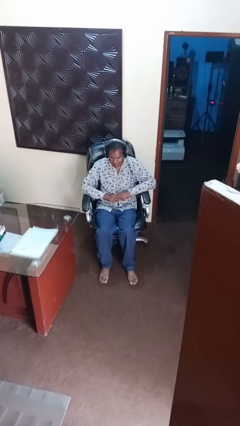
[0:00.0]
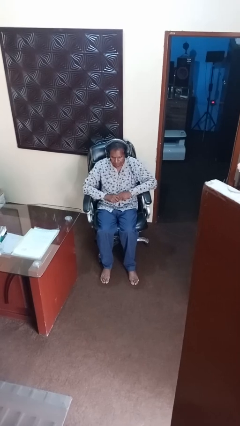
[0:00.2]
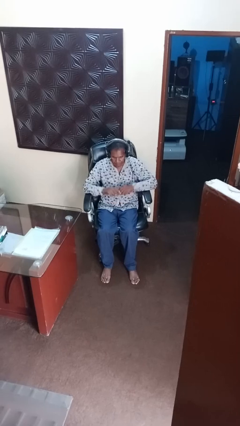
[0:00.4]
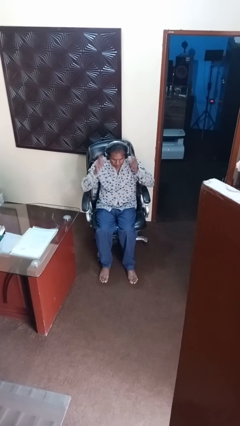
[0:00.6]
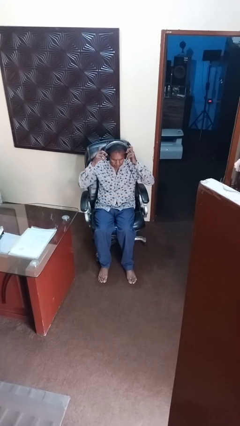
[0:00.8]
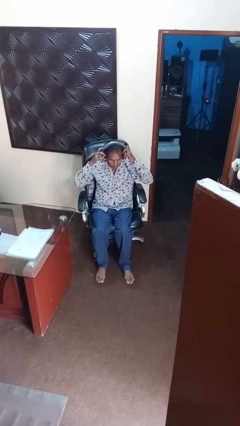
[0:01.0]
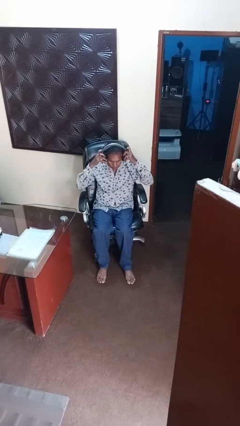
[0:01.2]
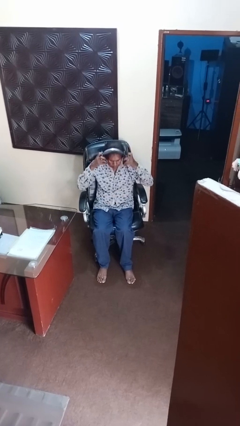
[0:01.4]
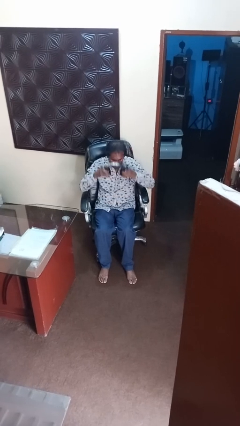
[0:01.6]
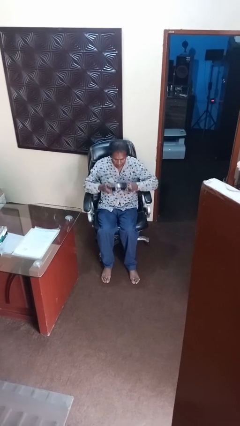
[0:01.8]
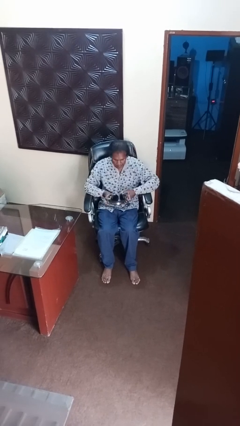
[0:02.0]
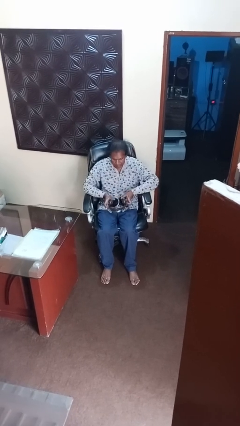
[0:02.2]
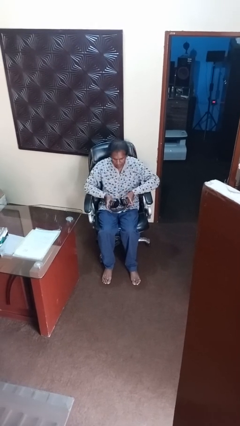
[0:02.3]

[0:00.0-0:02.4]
person takes off headphones

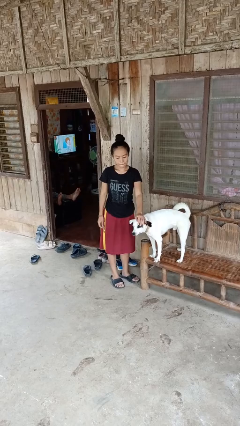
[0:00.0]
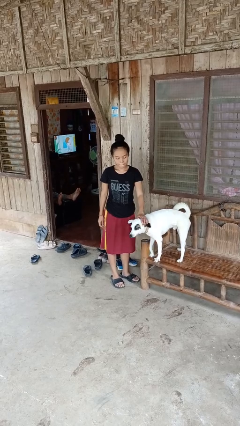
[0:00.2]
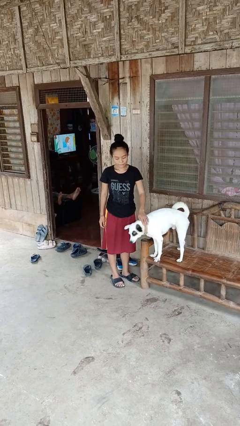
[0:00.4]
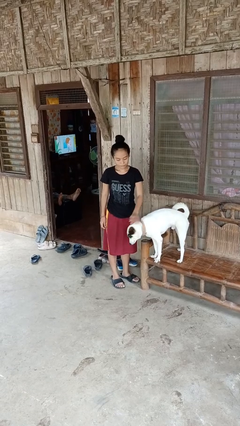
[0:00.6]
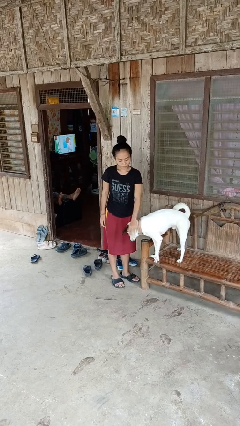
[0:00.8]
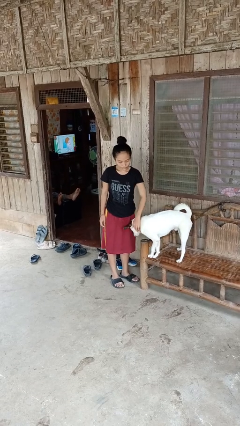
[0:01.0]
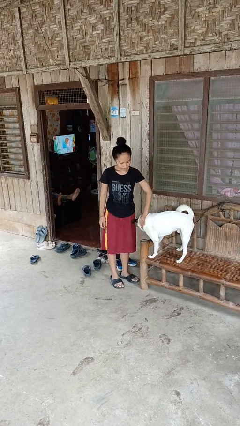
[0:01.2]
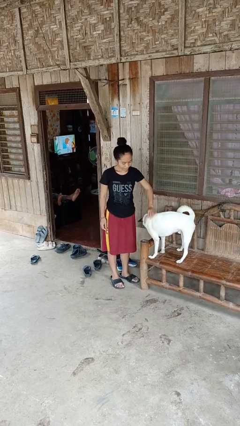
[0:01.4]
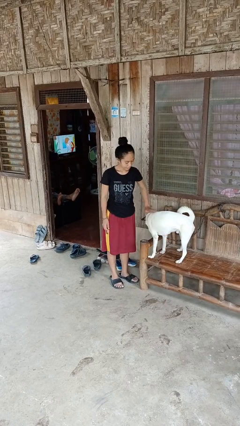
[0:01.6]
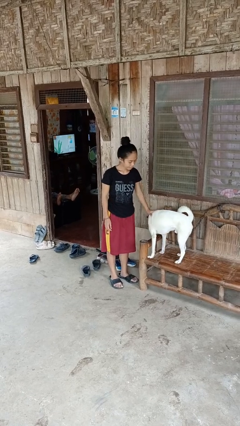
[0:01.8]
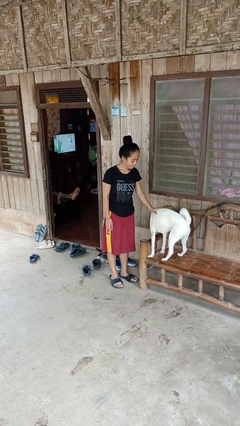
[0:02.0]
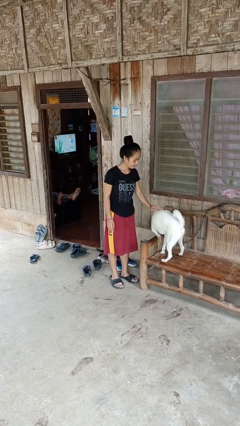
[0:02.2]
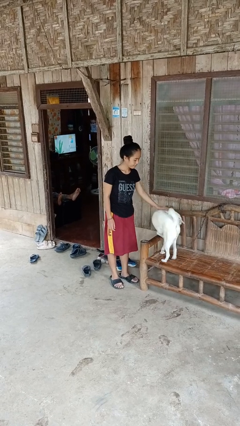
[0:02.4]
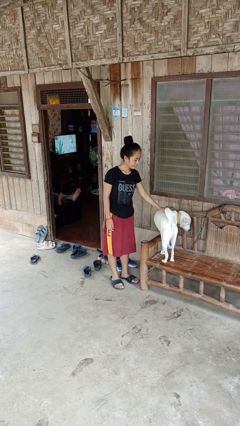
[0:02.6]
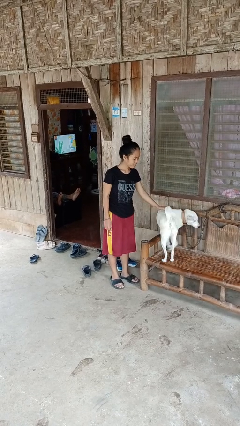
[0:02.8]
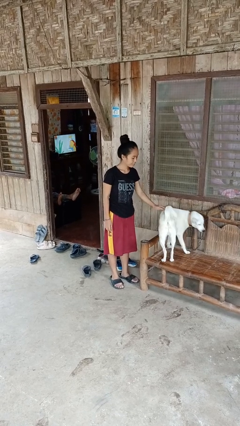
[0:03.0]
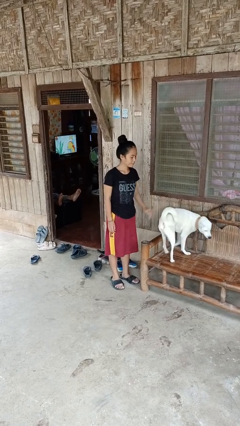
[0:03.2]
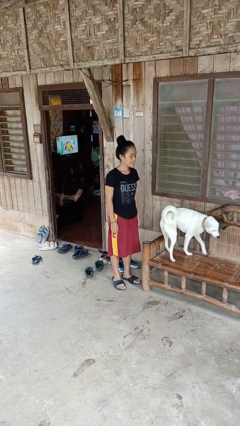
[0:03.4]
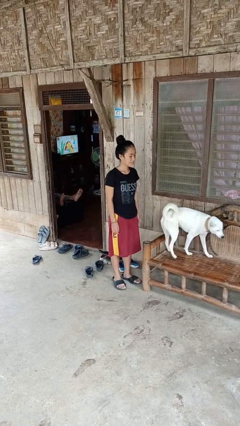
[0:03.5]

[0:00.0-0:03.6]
person pets dog

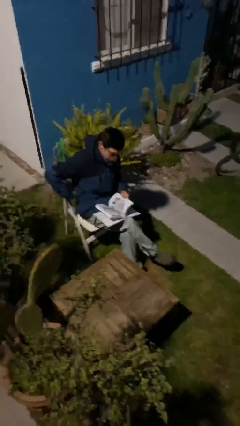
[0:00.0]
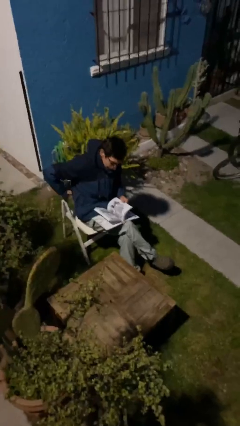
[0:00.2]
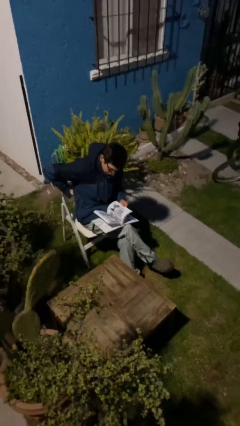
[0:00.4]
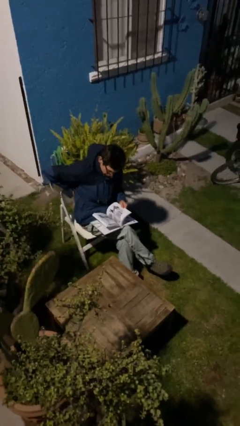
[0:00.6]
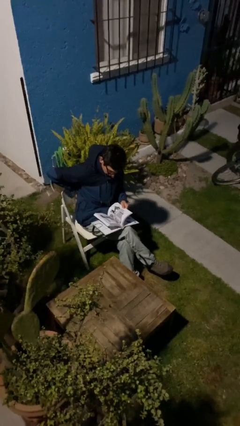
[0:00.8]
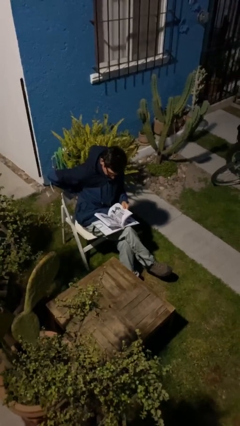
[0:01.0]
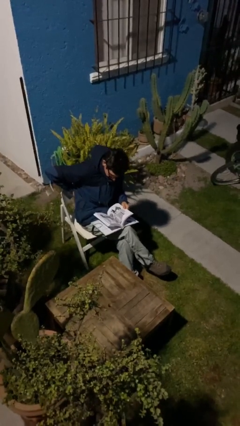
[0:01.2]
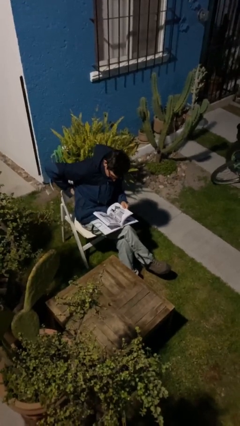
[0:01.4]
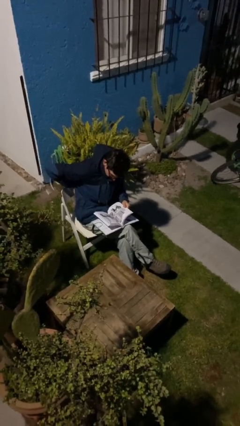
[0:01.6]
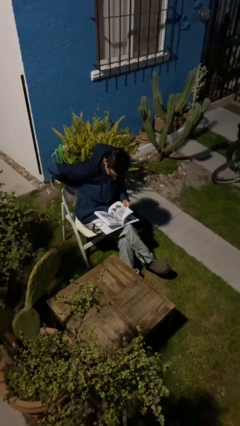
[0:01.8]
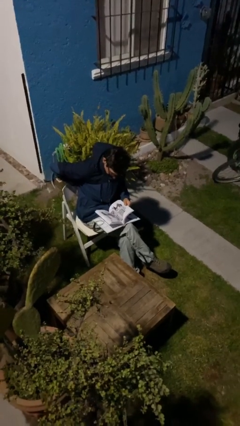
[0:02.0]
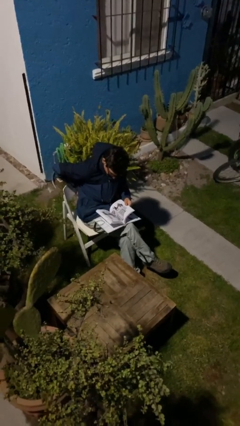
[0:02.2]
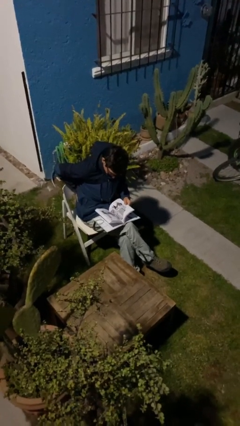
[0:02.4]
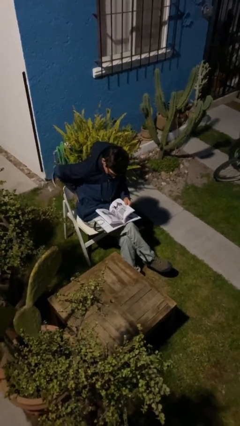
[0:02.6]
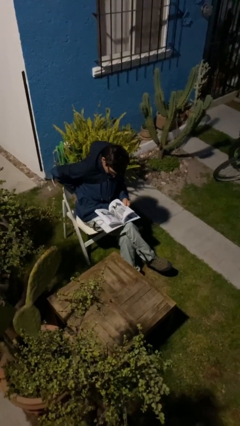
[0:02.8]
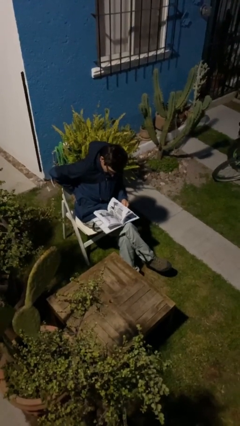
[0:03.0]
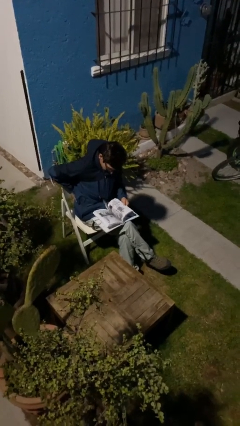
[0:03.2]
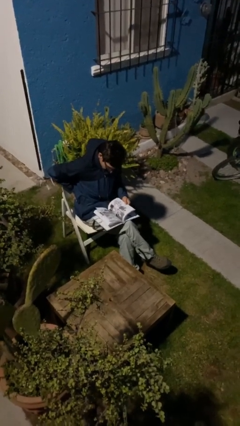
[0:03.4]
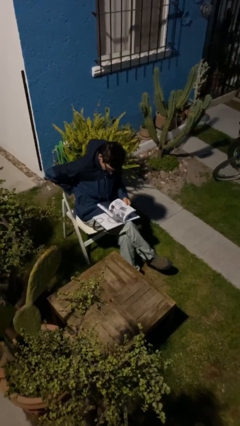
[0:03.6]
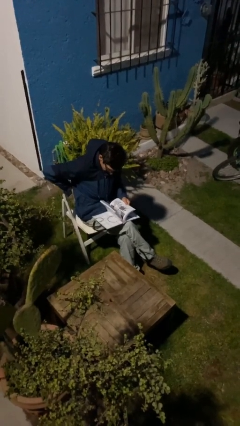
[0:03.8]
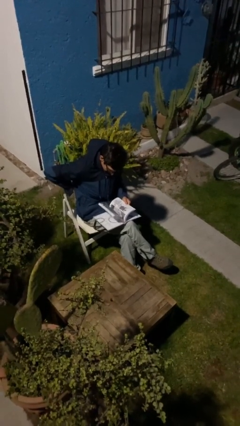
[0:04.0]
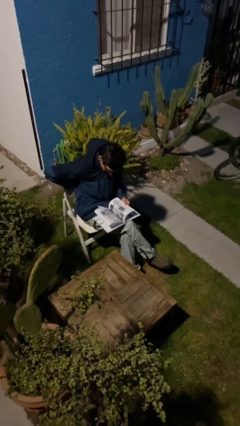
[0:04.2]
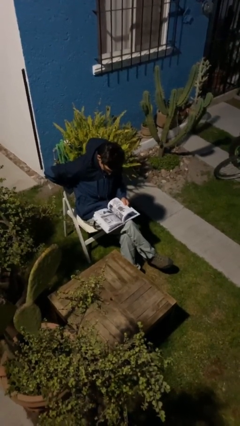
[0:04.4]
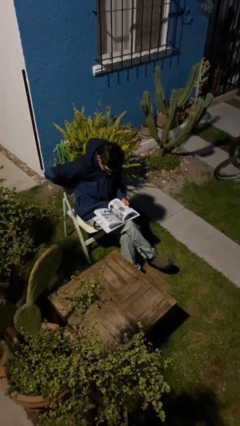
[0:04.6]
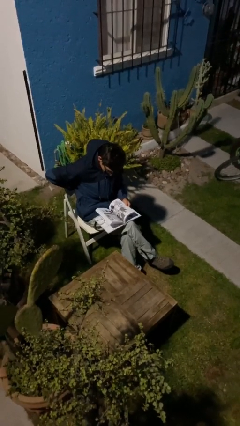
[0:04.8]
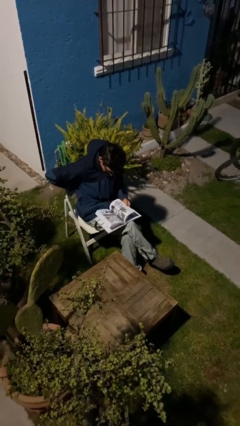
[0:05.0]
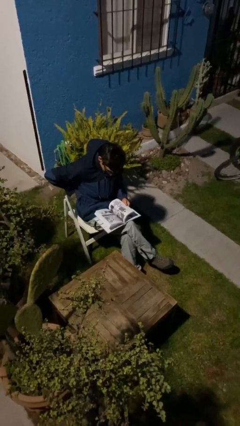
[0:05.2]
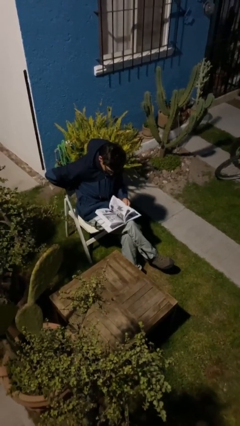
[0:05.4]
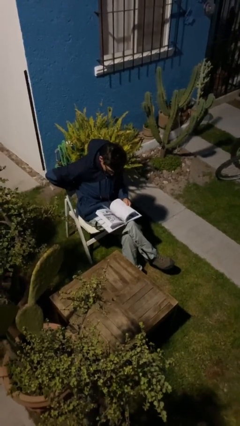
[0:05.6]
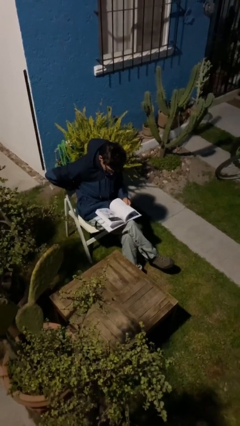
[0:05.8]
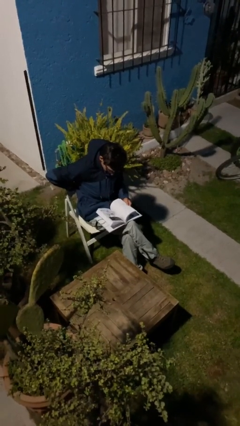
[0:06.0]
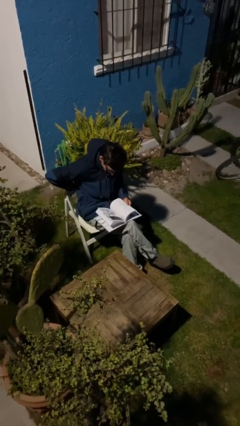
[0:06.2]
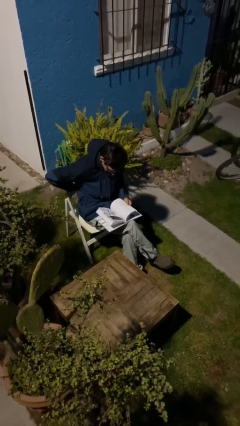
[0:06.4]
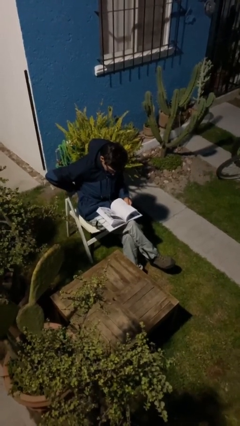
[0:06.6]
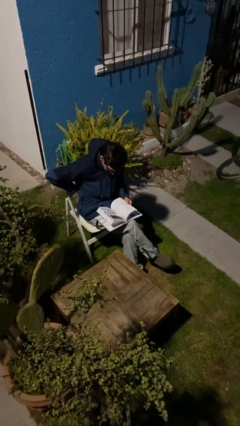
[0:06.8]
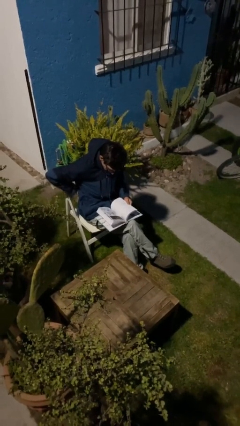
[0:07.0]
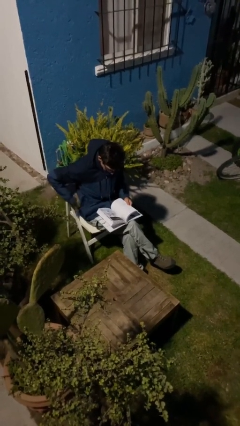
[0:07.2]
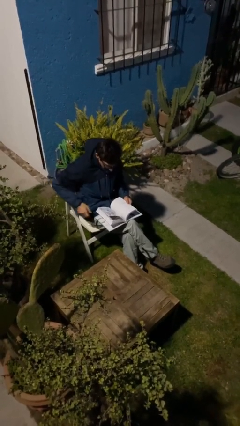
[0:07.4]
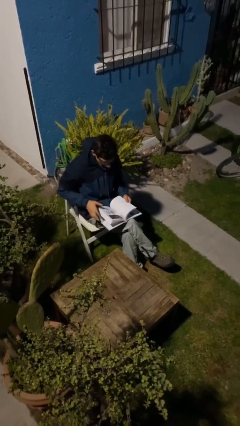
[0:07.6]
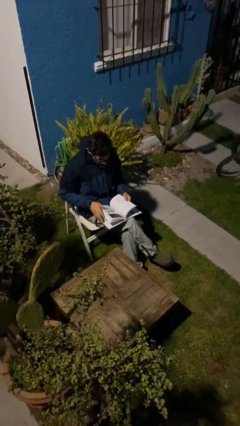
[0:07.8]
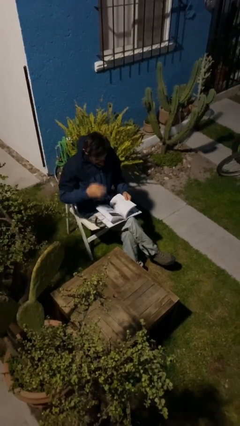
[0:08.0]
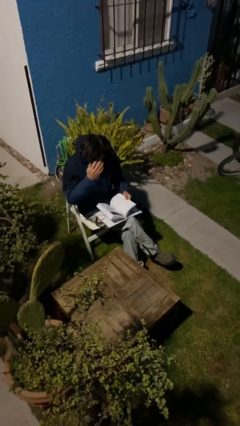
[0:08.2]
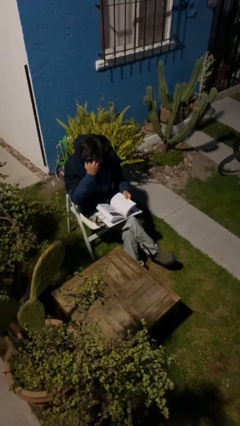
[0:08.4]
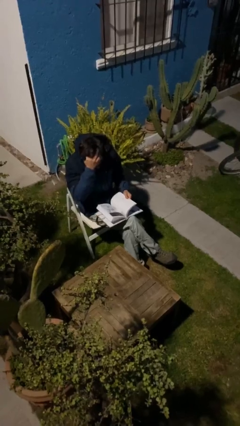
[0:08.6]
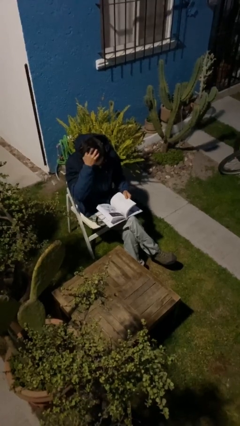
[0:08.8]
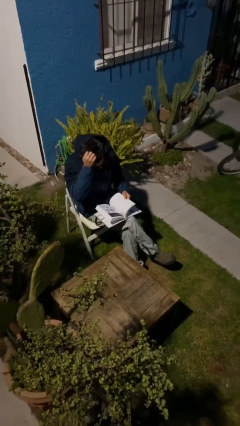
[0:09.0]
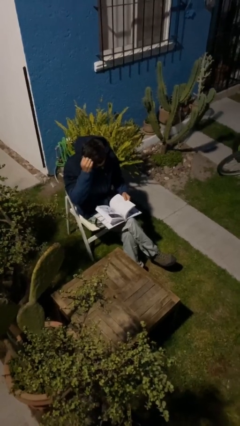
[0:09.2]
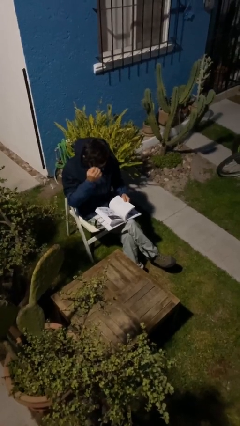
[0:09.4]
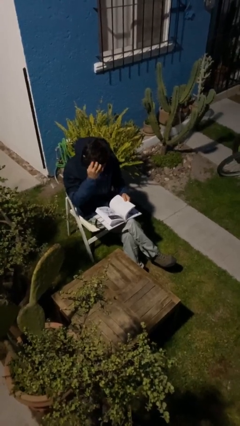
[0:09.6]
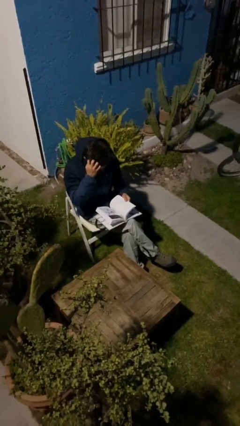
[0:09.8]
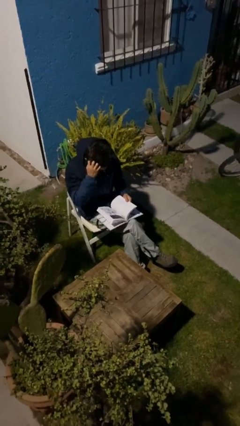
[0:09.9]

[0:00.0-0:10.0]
person reads document

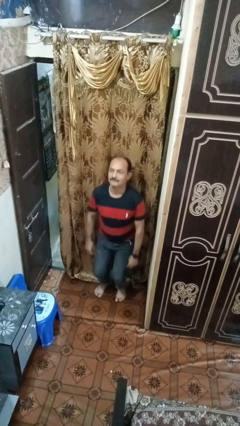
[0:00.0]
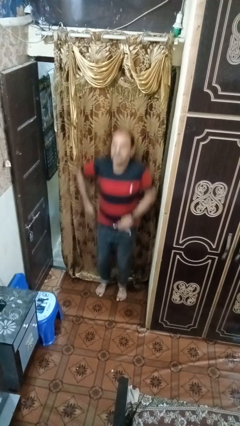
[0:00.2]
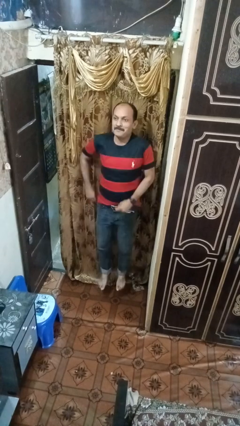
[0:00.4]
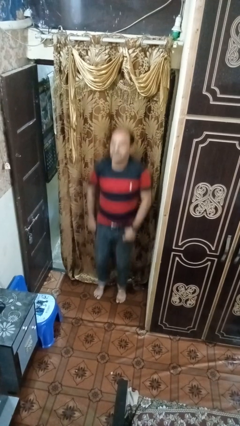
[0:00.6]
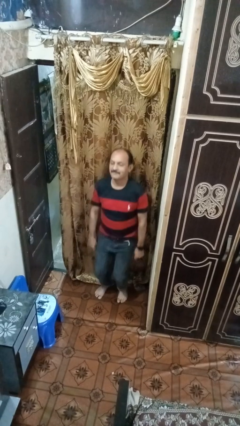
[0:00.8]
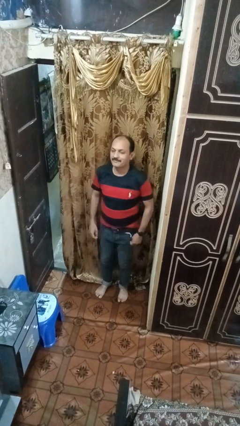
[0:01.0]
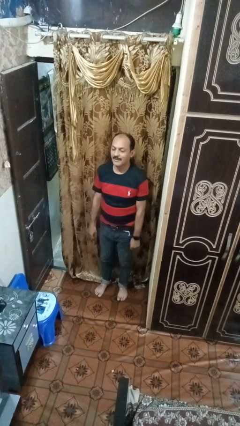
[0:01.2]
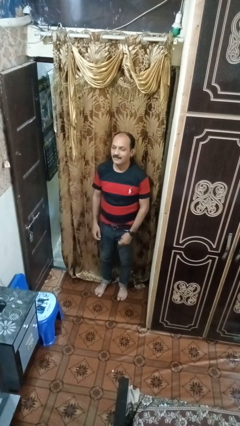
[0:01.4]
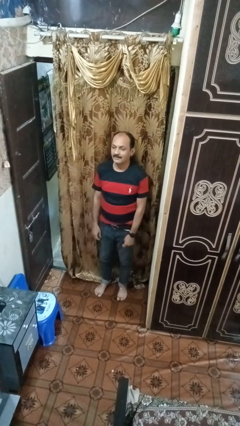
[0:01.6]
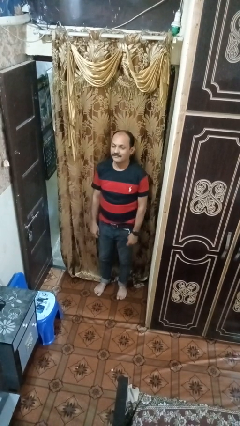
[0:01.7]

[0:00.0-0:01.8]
person jumps
